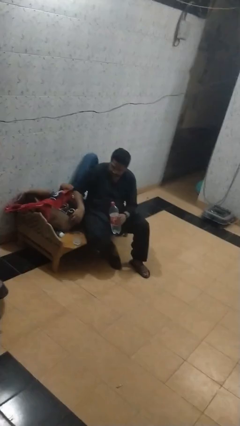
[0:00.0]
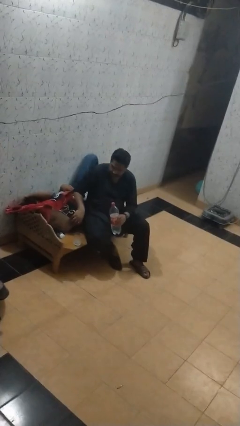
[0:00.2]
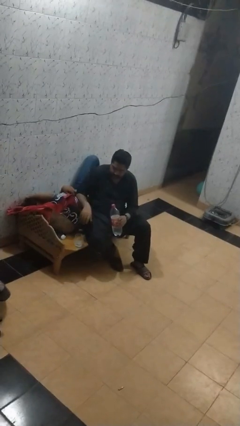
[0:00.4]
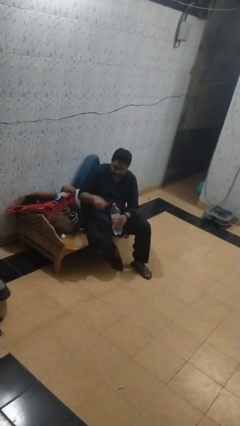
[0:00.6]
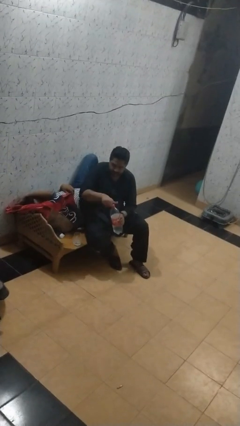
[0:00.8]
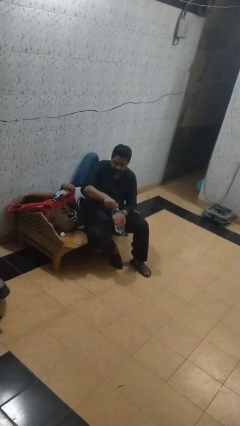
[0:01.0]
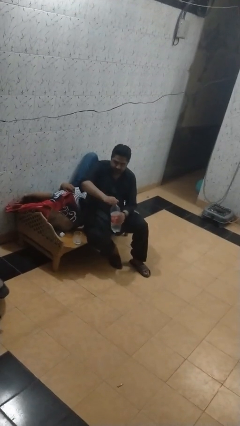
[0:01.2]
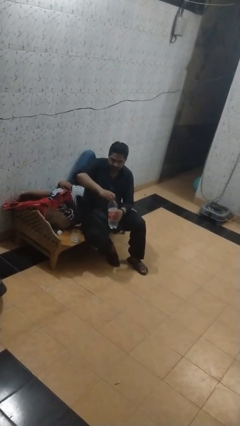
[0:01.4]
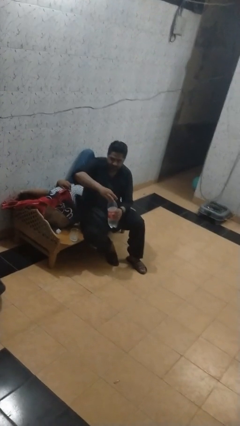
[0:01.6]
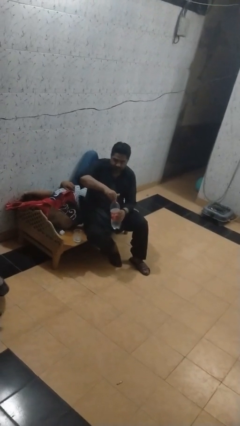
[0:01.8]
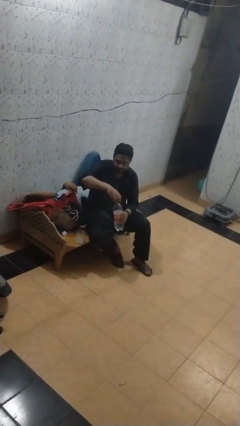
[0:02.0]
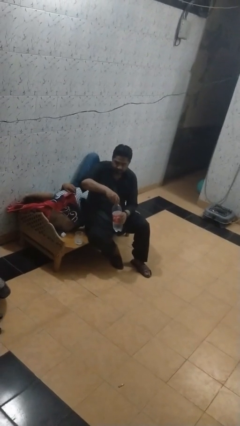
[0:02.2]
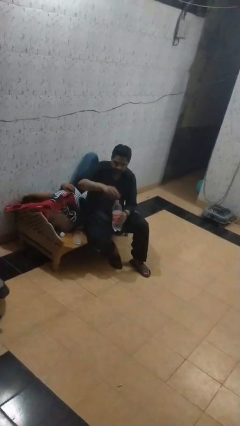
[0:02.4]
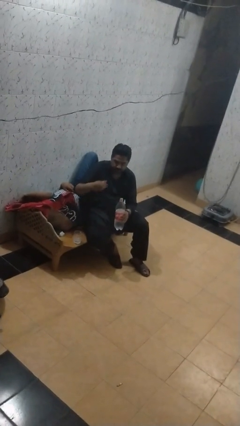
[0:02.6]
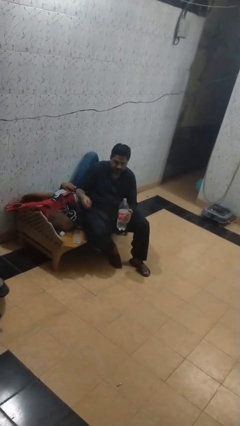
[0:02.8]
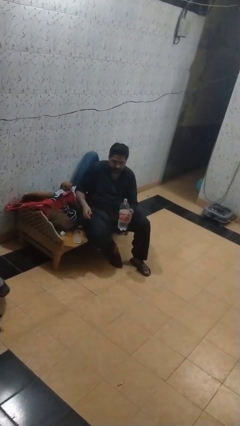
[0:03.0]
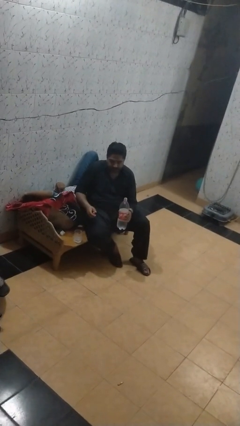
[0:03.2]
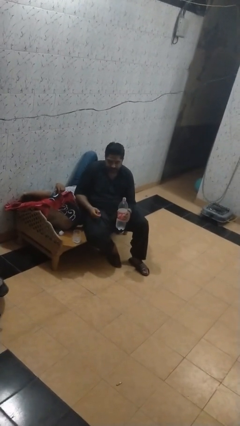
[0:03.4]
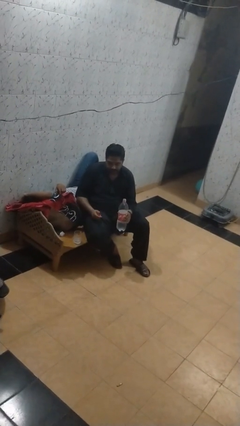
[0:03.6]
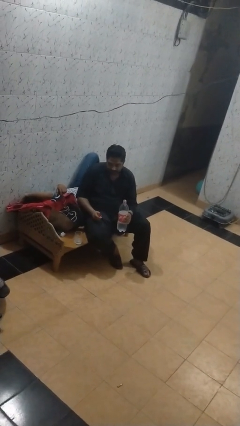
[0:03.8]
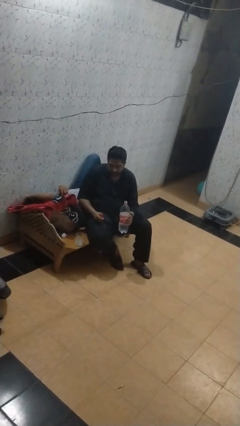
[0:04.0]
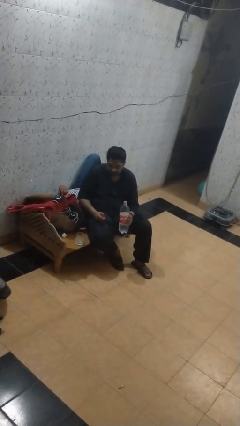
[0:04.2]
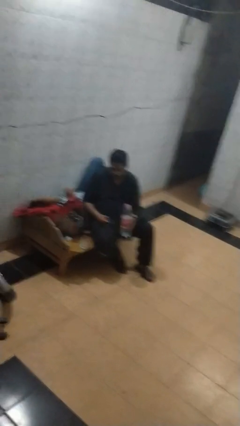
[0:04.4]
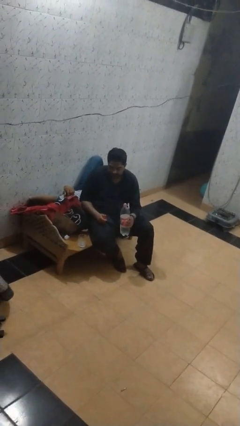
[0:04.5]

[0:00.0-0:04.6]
person unscrews lid from bottle

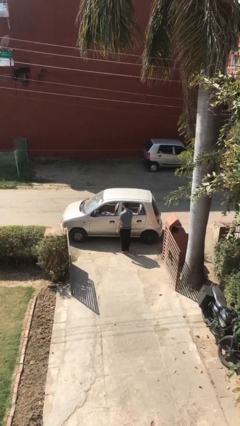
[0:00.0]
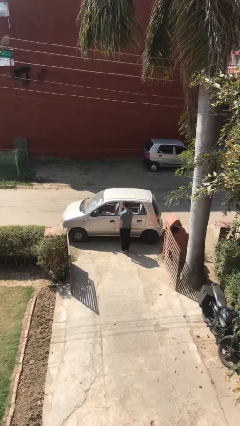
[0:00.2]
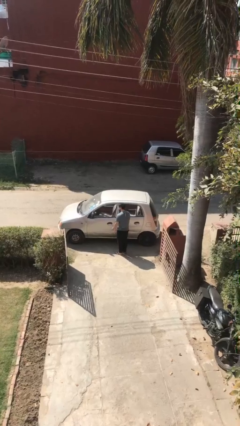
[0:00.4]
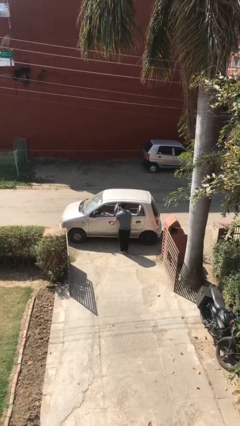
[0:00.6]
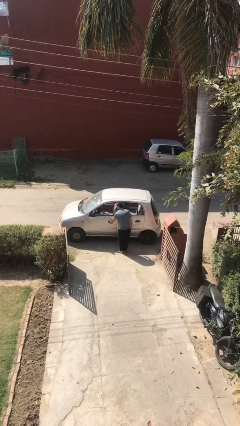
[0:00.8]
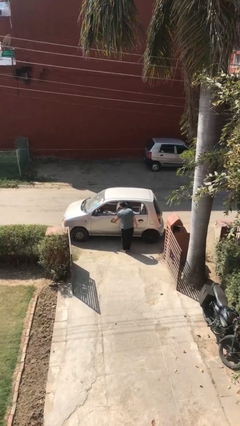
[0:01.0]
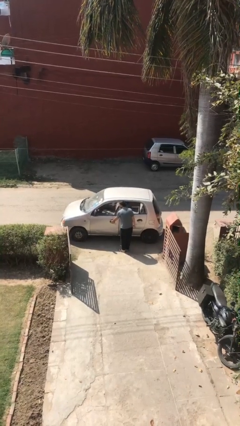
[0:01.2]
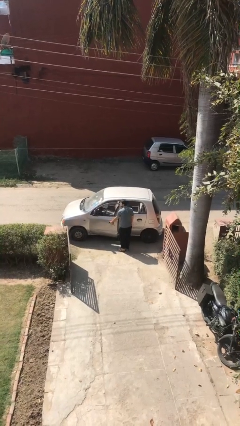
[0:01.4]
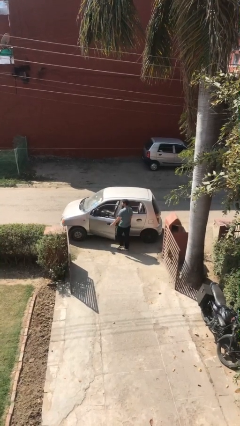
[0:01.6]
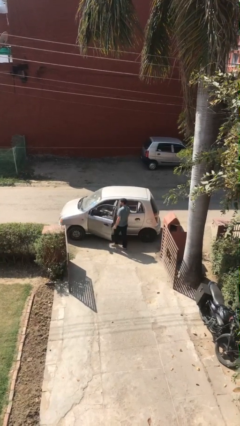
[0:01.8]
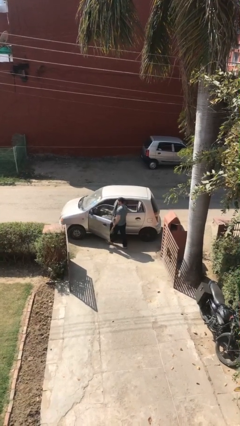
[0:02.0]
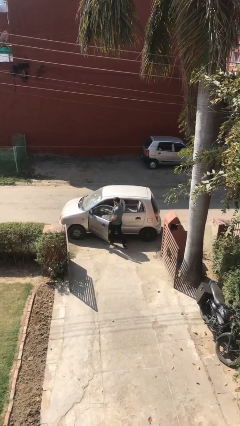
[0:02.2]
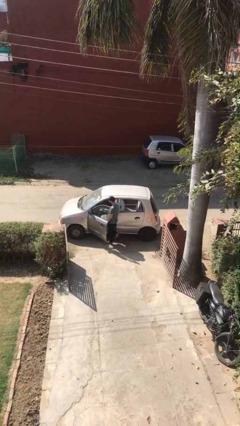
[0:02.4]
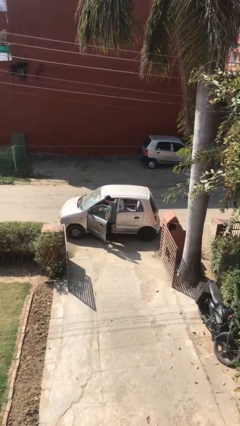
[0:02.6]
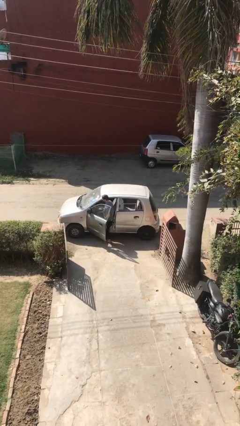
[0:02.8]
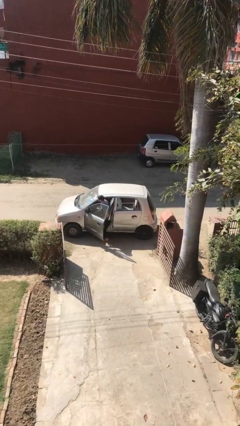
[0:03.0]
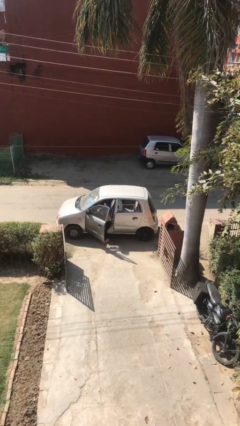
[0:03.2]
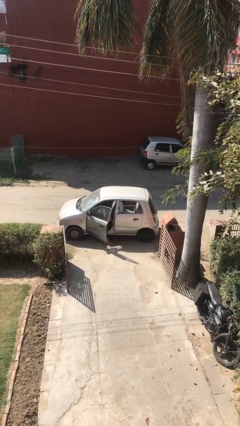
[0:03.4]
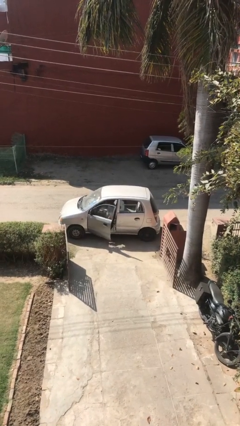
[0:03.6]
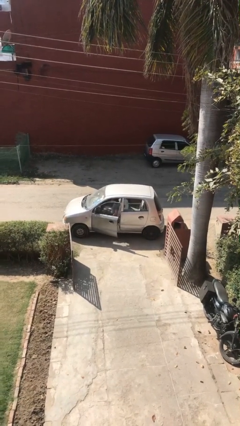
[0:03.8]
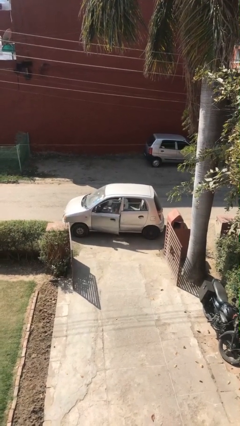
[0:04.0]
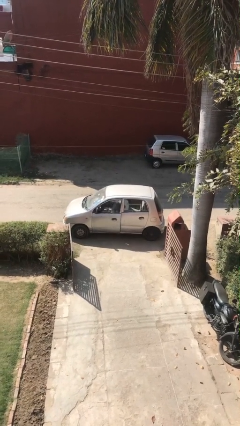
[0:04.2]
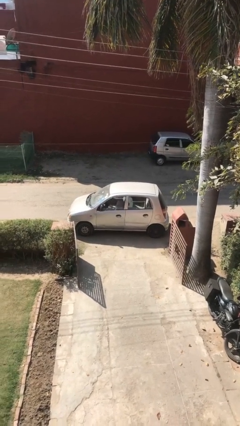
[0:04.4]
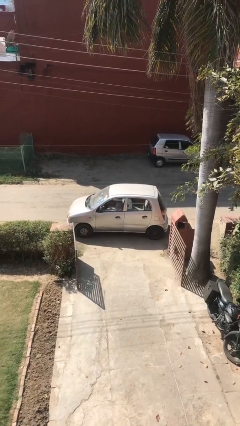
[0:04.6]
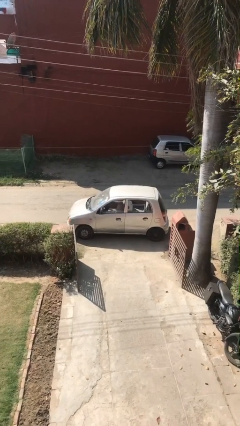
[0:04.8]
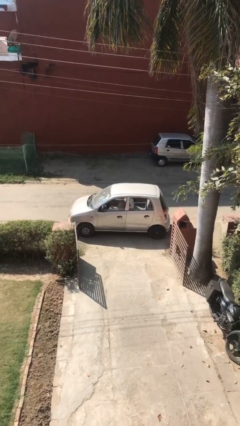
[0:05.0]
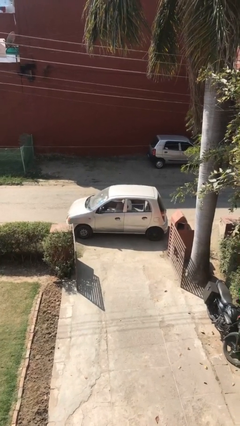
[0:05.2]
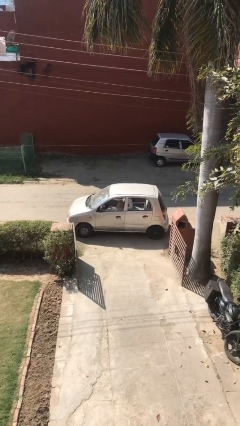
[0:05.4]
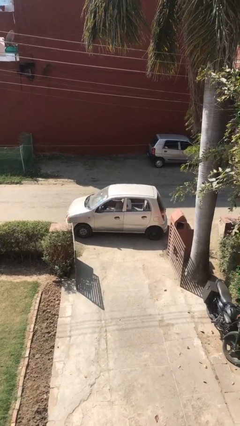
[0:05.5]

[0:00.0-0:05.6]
car picks up person

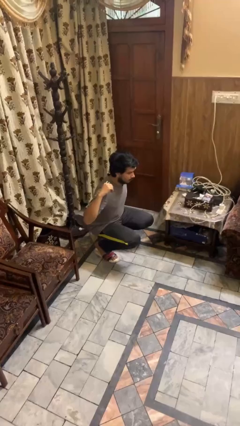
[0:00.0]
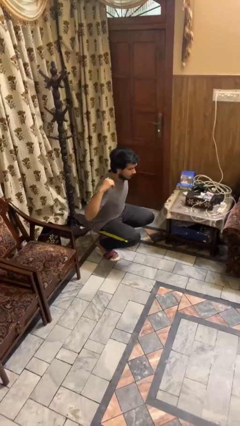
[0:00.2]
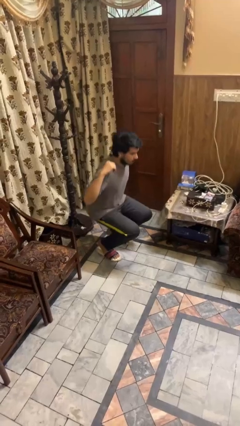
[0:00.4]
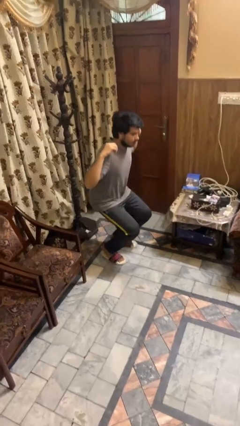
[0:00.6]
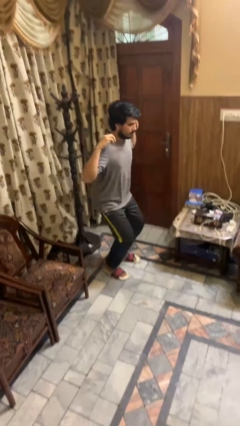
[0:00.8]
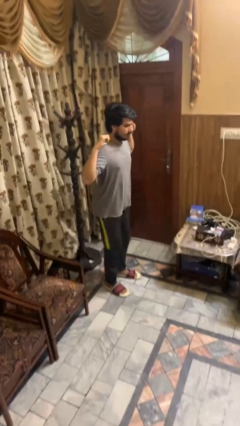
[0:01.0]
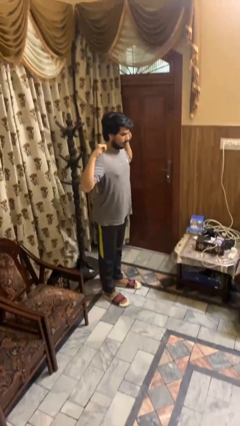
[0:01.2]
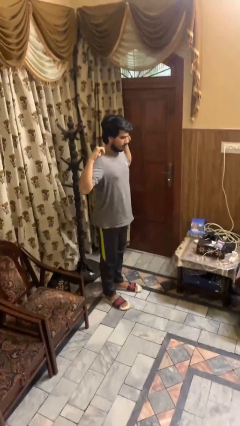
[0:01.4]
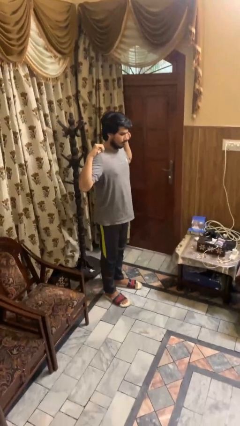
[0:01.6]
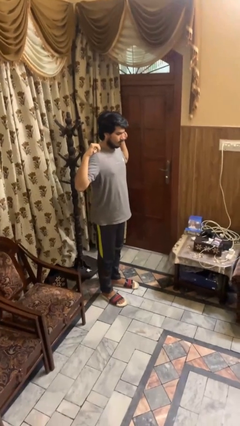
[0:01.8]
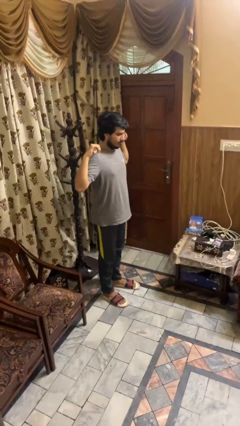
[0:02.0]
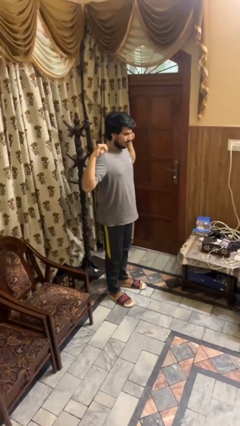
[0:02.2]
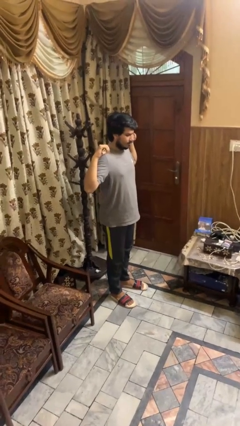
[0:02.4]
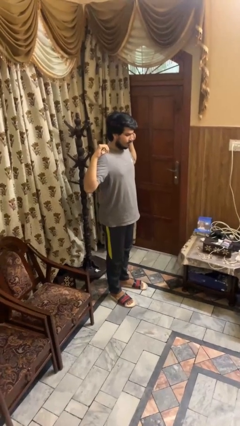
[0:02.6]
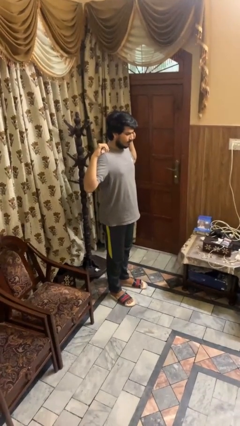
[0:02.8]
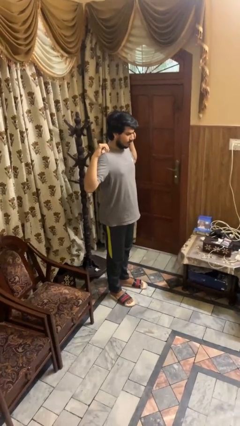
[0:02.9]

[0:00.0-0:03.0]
person stands up

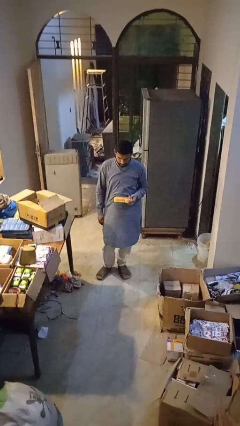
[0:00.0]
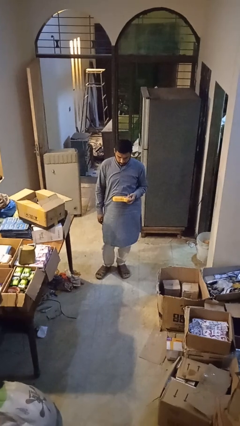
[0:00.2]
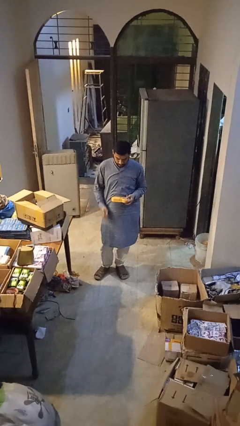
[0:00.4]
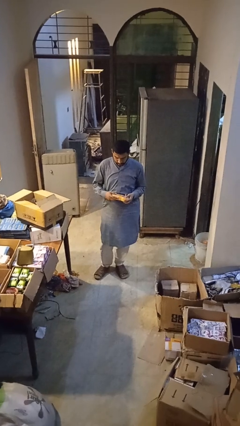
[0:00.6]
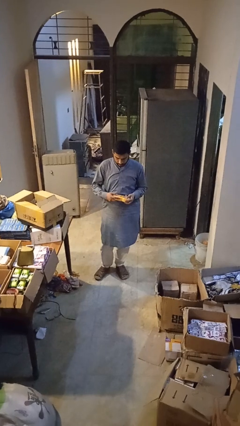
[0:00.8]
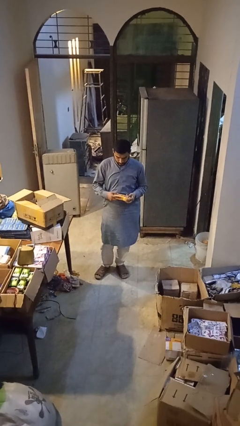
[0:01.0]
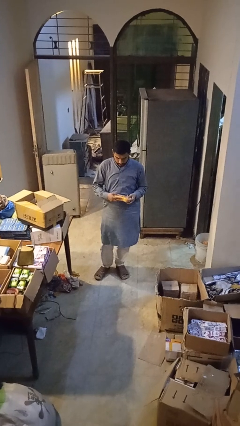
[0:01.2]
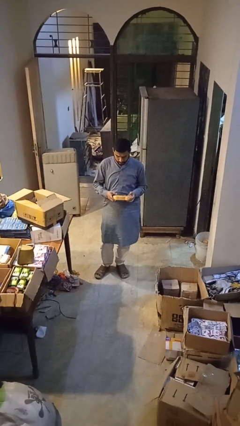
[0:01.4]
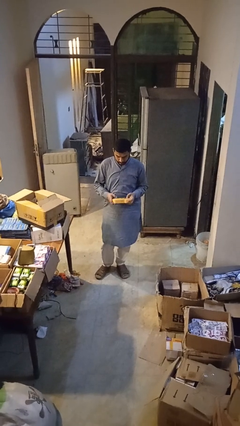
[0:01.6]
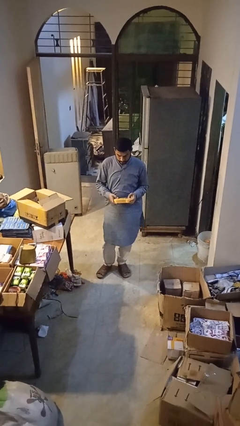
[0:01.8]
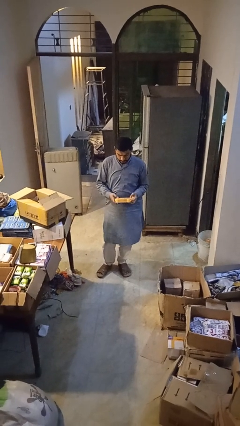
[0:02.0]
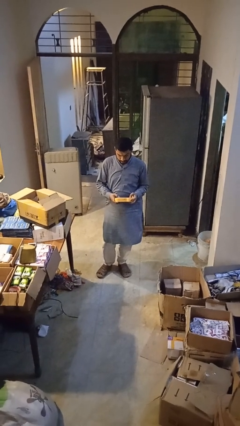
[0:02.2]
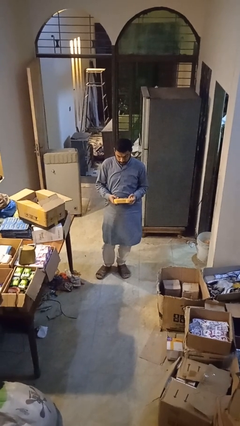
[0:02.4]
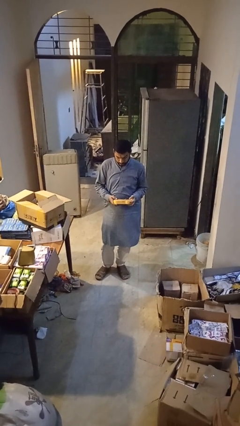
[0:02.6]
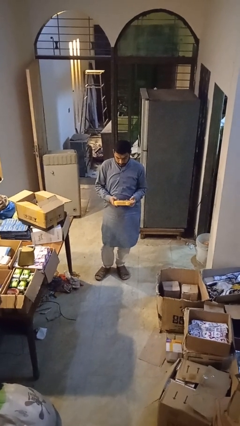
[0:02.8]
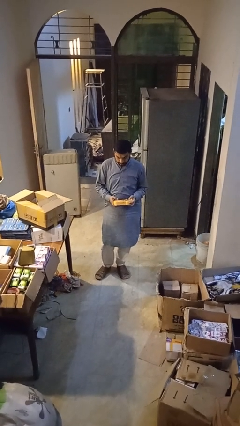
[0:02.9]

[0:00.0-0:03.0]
person interacts with handheld game

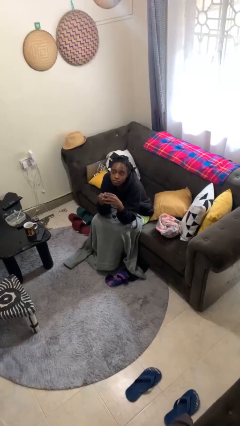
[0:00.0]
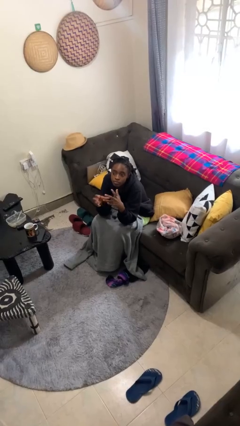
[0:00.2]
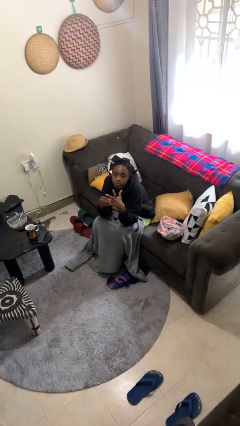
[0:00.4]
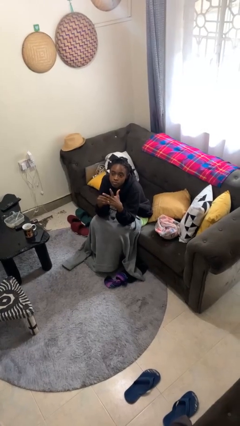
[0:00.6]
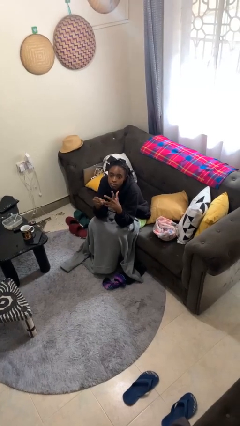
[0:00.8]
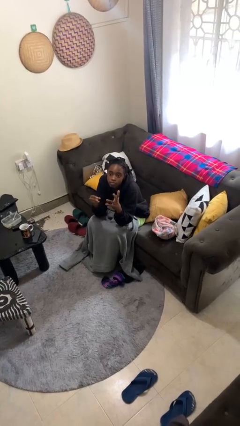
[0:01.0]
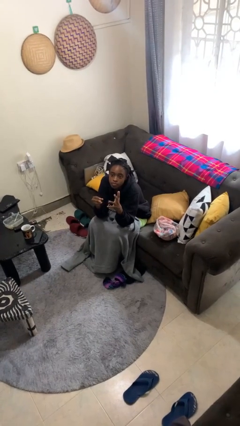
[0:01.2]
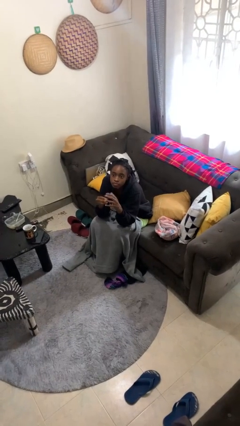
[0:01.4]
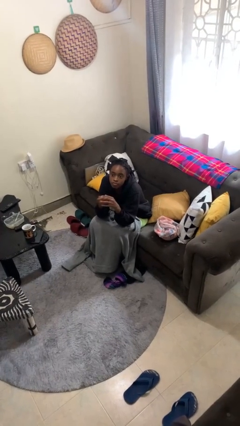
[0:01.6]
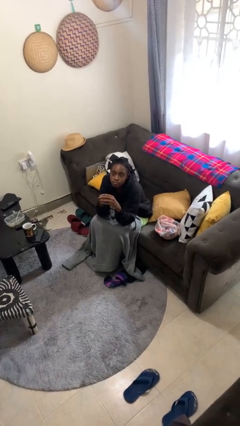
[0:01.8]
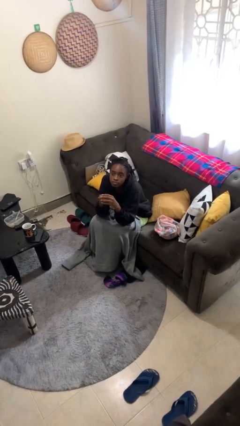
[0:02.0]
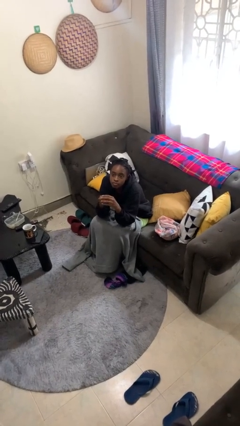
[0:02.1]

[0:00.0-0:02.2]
person takes off ring
